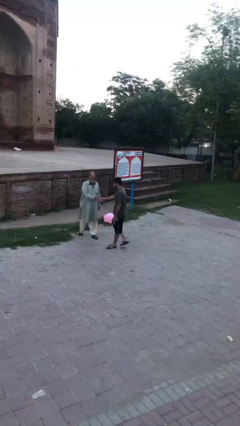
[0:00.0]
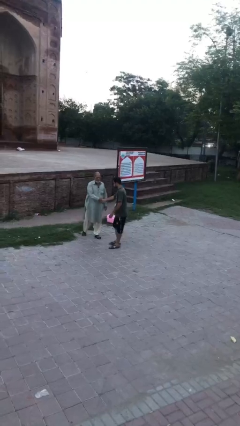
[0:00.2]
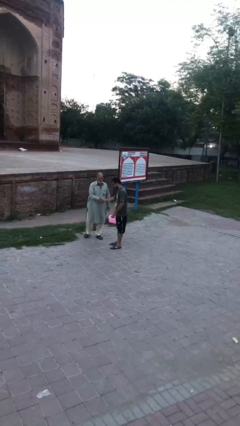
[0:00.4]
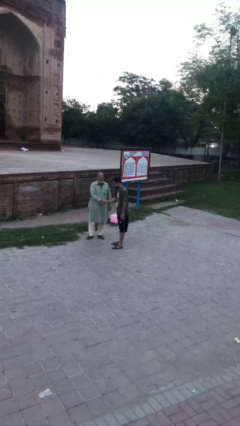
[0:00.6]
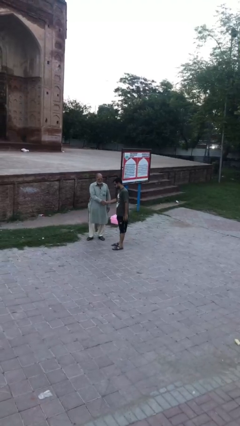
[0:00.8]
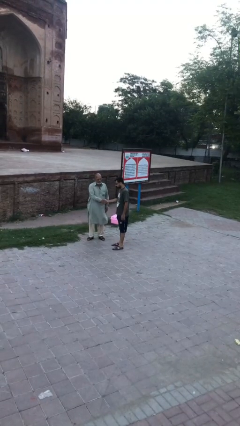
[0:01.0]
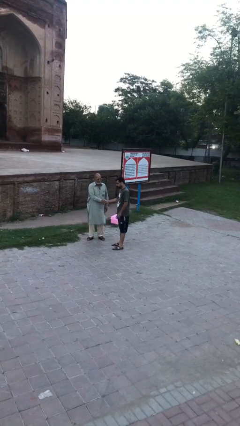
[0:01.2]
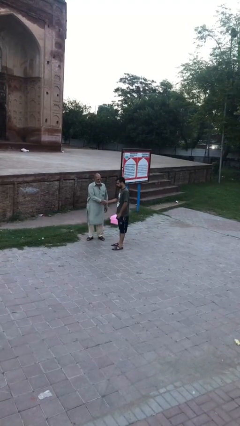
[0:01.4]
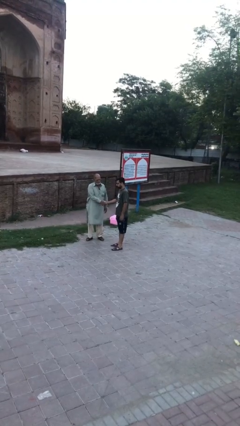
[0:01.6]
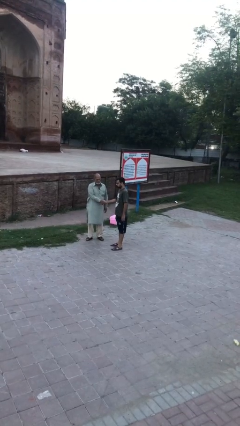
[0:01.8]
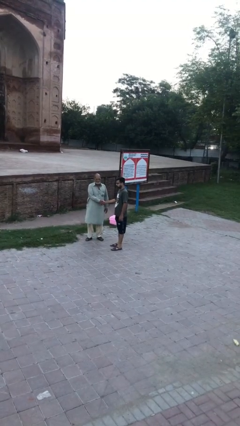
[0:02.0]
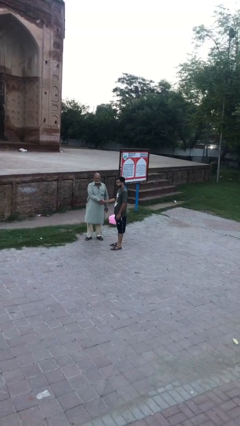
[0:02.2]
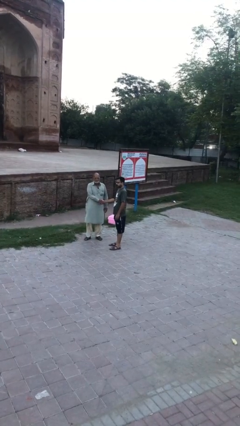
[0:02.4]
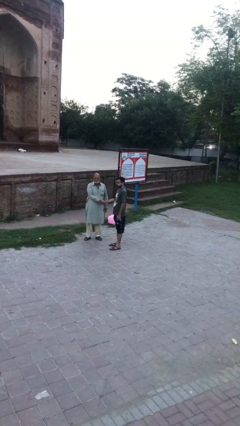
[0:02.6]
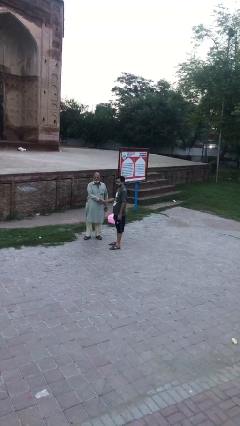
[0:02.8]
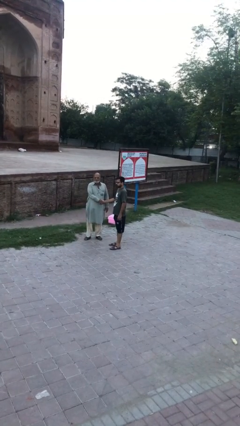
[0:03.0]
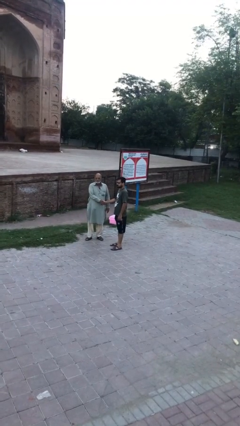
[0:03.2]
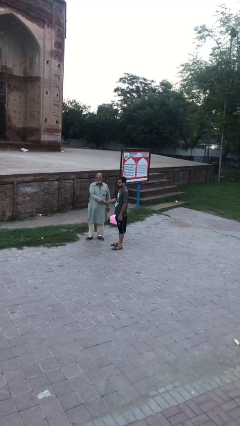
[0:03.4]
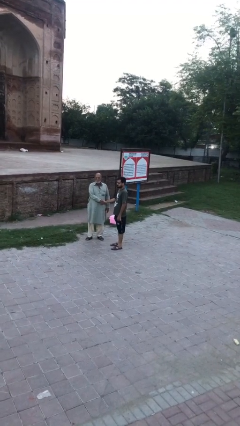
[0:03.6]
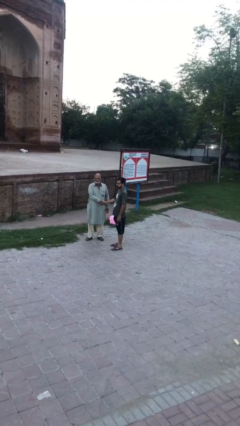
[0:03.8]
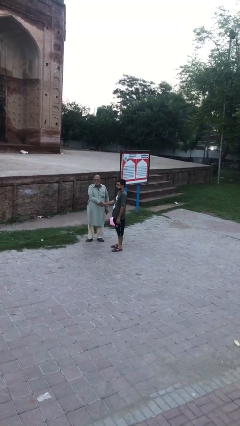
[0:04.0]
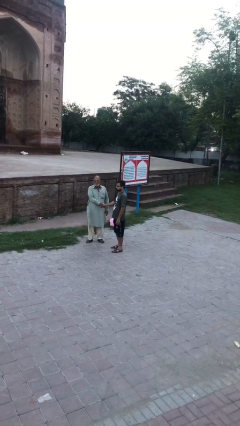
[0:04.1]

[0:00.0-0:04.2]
person shakes hand

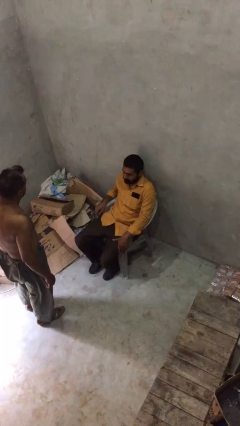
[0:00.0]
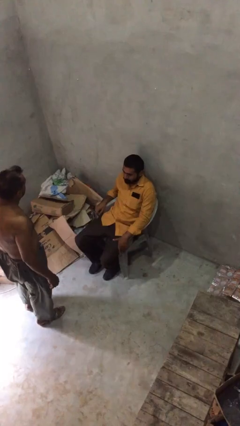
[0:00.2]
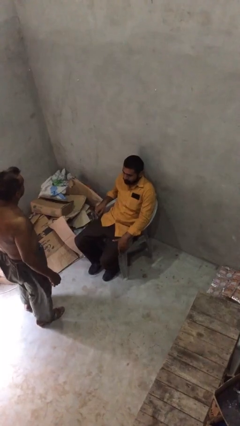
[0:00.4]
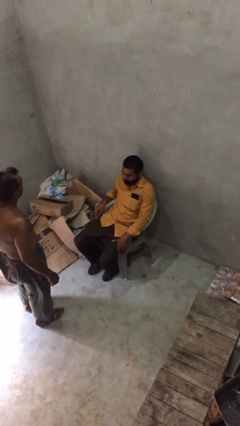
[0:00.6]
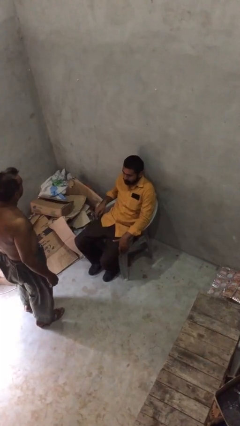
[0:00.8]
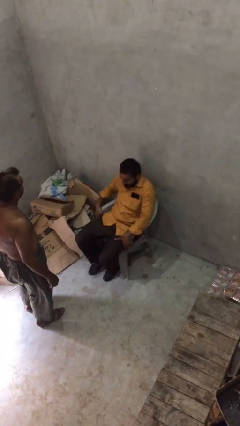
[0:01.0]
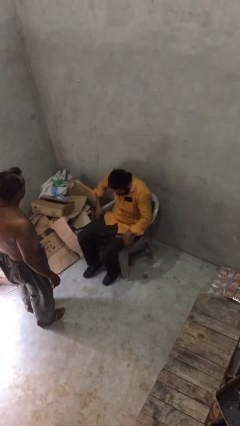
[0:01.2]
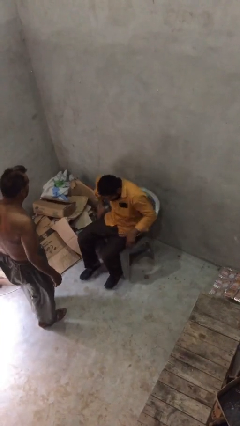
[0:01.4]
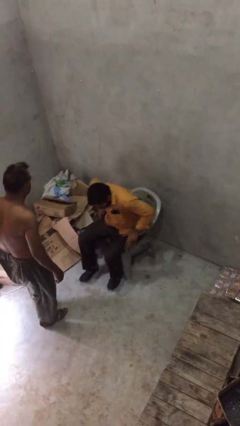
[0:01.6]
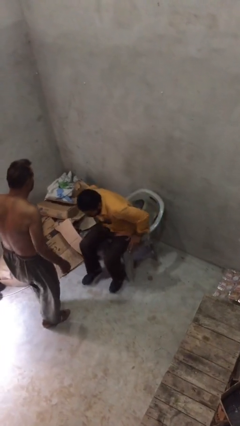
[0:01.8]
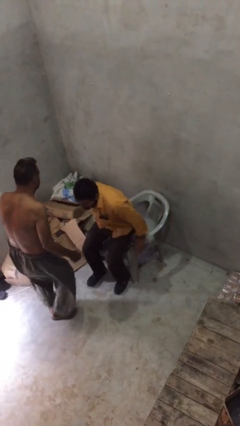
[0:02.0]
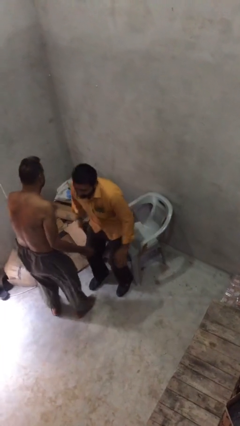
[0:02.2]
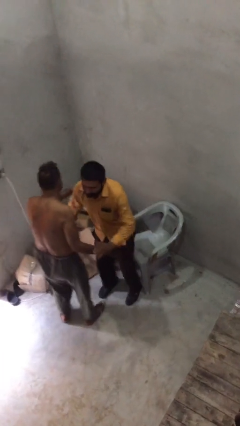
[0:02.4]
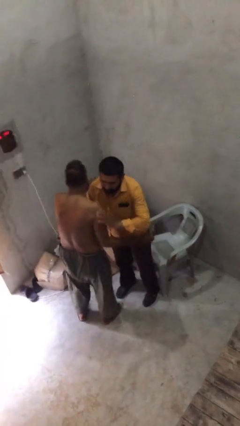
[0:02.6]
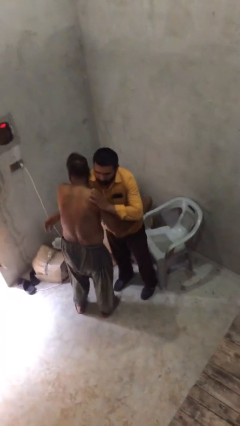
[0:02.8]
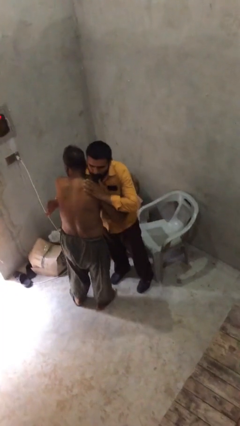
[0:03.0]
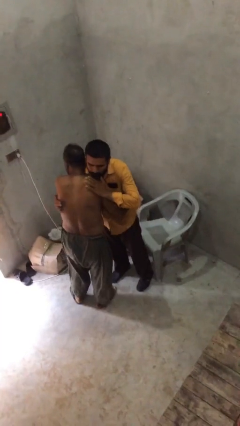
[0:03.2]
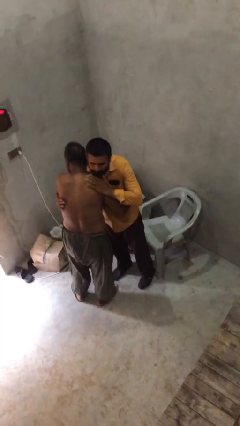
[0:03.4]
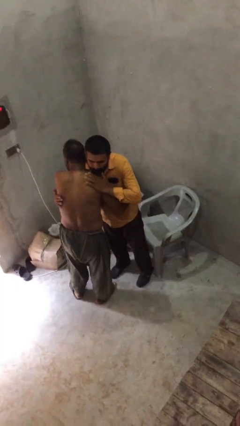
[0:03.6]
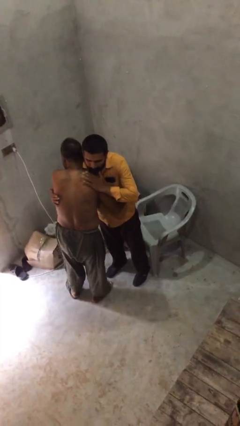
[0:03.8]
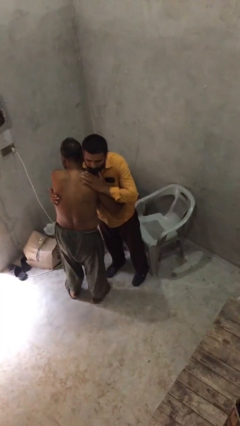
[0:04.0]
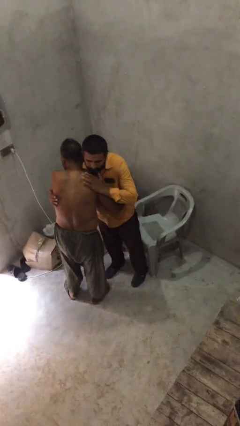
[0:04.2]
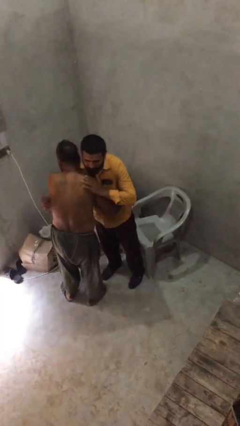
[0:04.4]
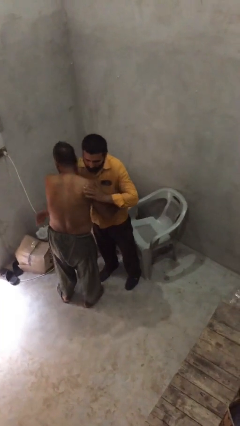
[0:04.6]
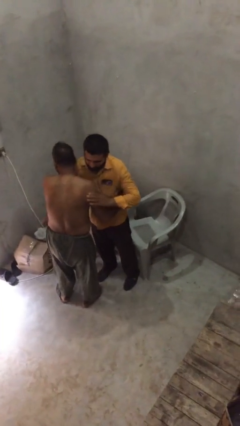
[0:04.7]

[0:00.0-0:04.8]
person embraces person

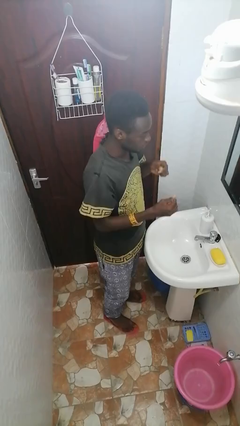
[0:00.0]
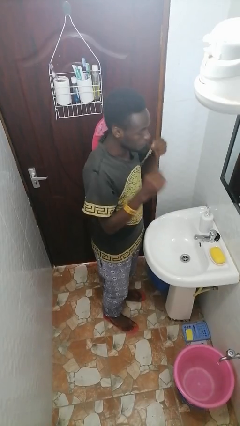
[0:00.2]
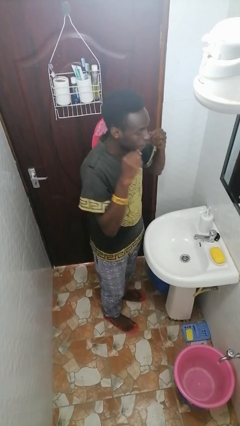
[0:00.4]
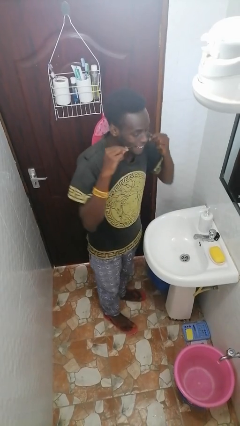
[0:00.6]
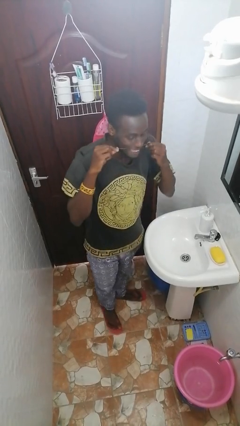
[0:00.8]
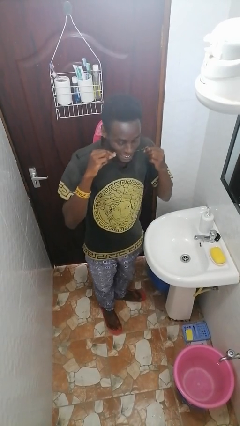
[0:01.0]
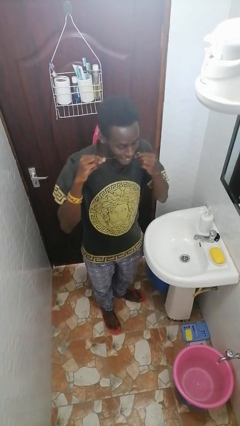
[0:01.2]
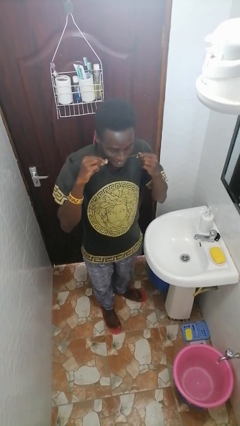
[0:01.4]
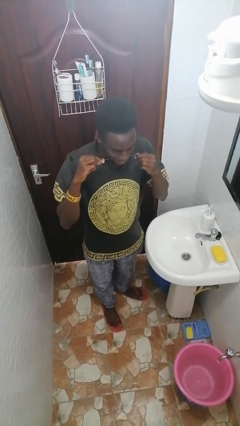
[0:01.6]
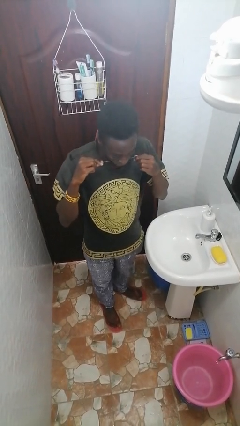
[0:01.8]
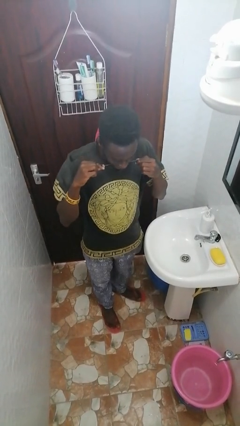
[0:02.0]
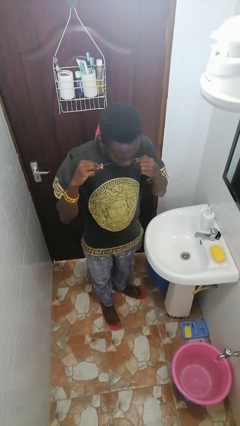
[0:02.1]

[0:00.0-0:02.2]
person flosses

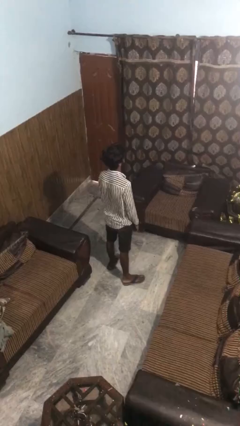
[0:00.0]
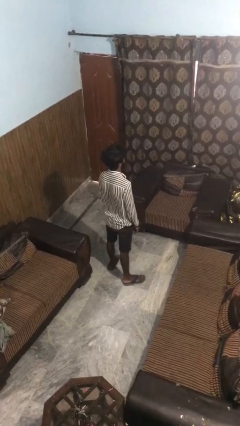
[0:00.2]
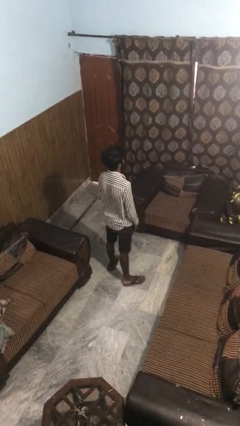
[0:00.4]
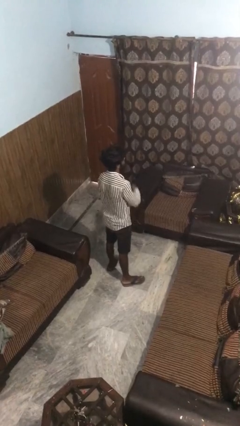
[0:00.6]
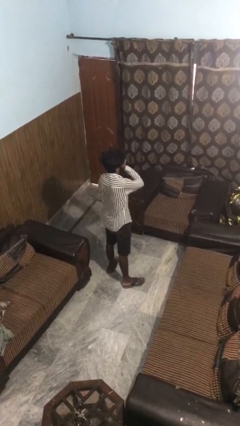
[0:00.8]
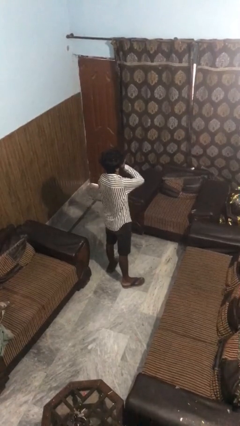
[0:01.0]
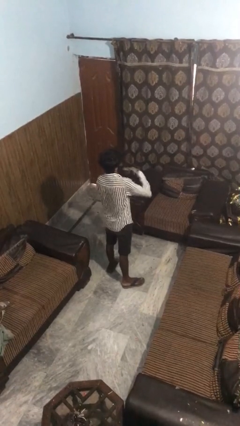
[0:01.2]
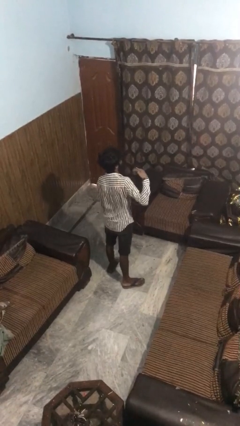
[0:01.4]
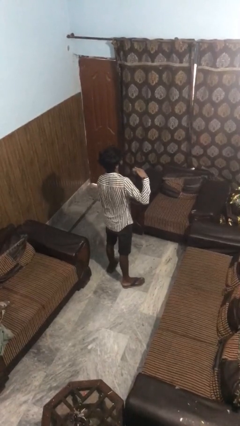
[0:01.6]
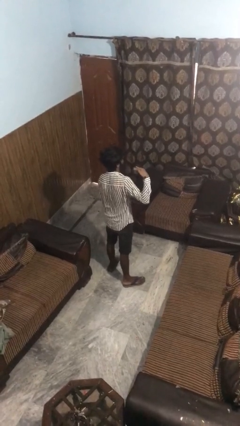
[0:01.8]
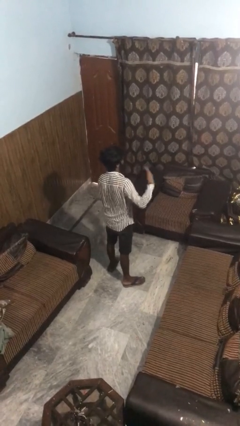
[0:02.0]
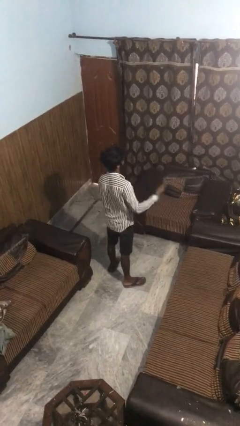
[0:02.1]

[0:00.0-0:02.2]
person gestures cut

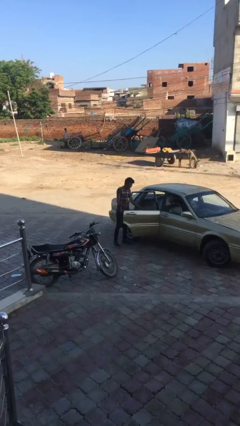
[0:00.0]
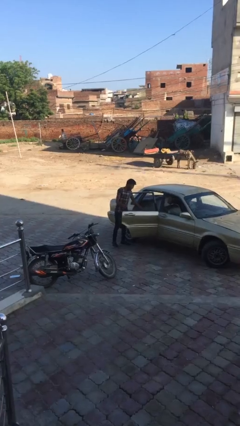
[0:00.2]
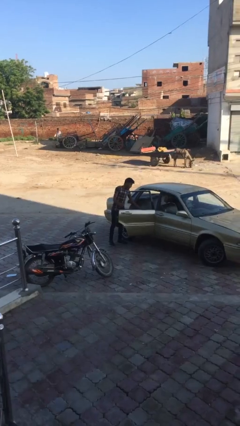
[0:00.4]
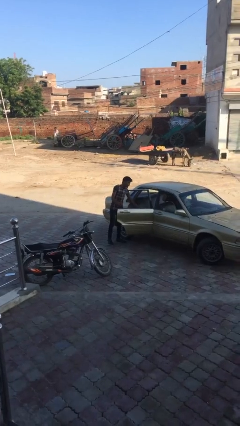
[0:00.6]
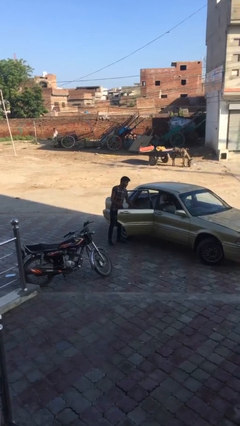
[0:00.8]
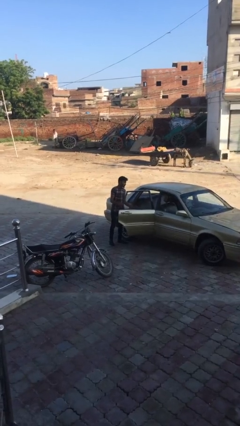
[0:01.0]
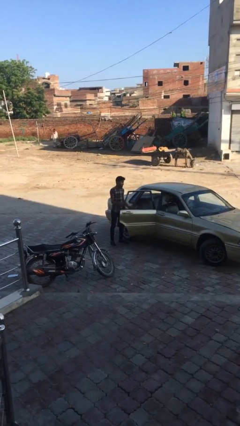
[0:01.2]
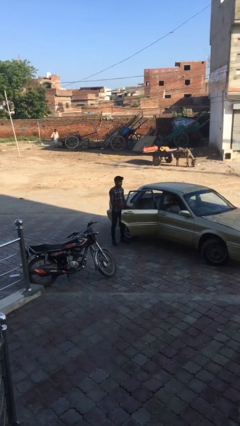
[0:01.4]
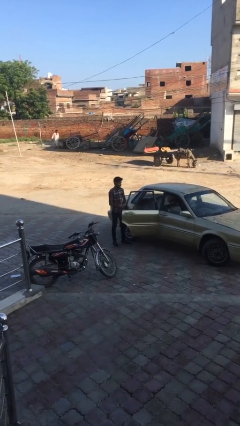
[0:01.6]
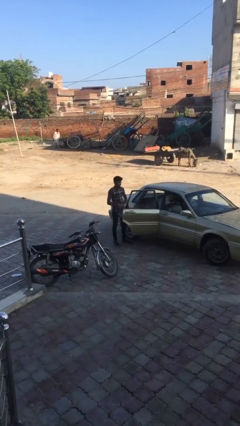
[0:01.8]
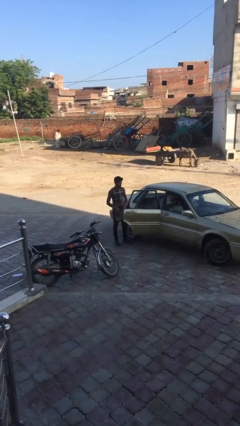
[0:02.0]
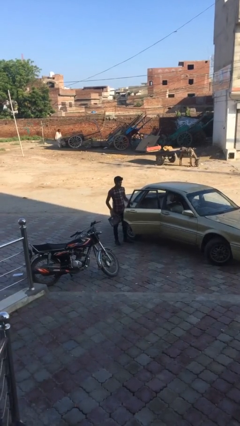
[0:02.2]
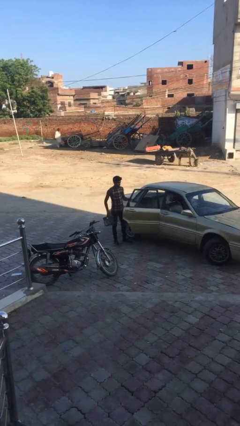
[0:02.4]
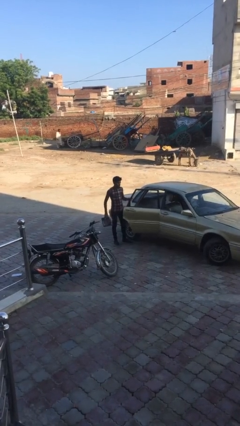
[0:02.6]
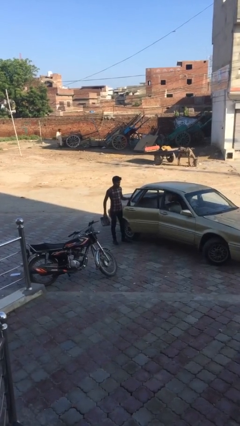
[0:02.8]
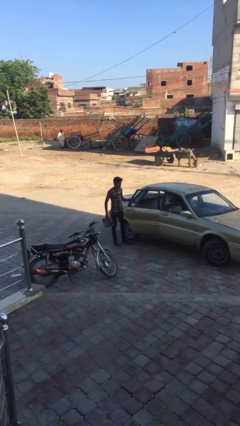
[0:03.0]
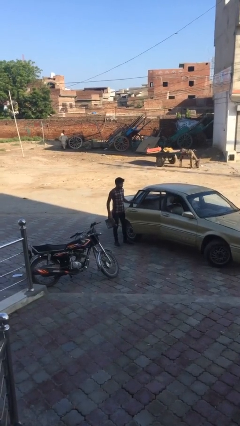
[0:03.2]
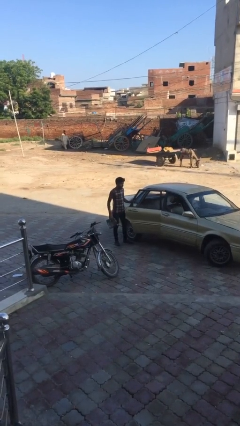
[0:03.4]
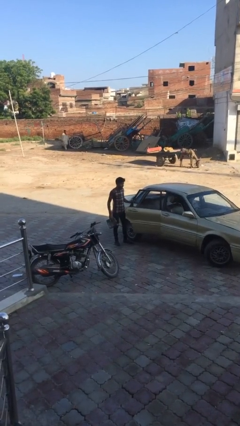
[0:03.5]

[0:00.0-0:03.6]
person unloads car

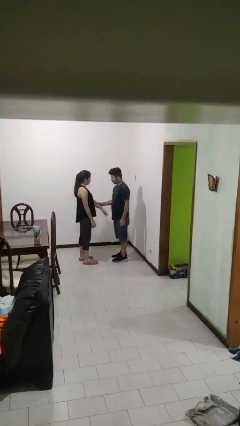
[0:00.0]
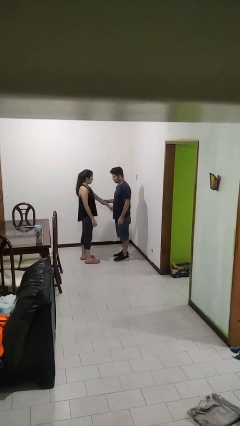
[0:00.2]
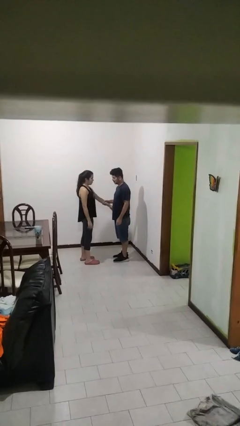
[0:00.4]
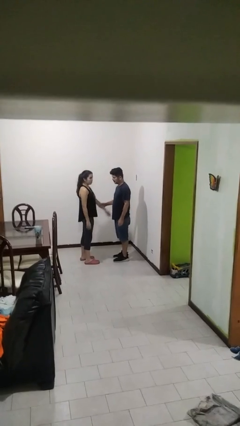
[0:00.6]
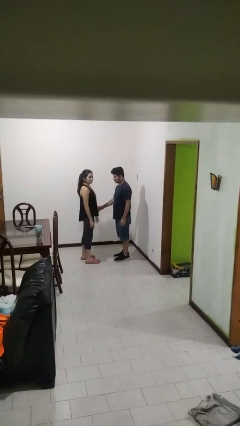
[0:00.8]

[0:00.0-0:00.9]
person grabs person by forearm
